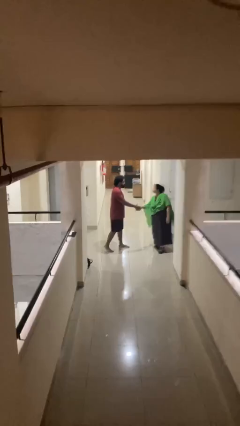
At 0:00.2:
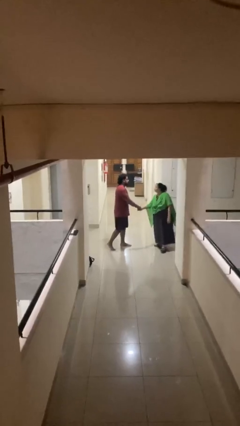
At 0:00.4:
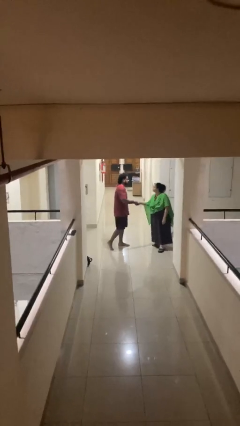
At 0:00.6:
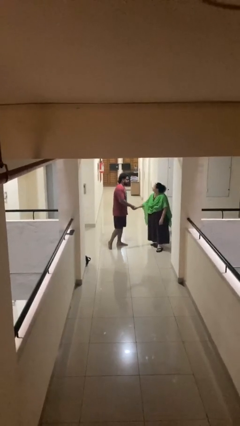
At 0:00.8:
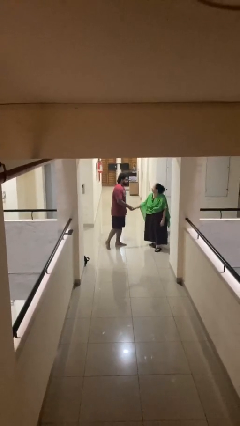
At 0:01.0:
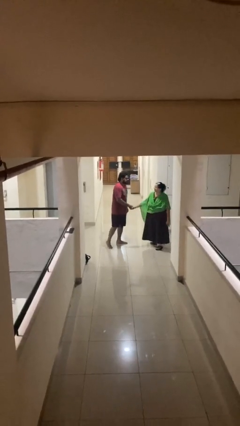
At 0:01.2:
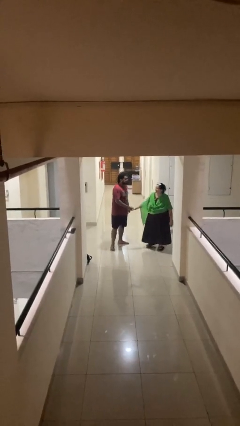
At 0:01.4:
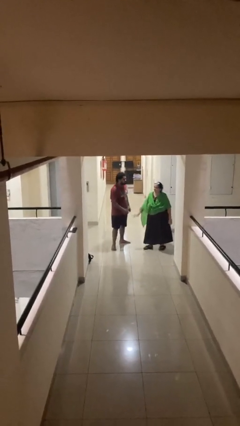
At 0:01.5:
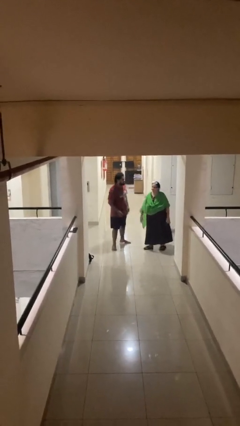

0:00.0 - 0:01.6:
person shakes hand

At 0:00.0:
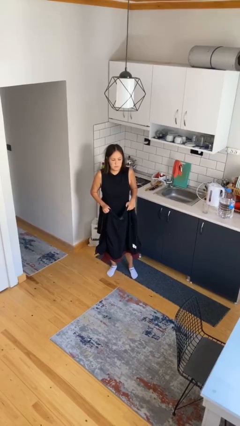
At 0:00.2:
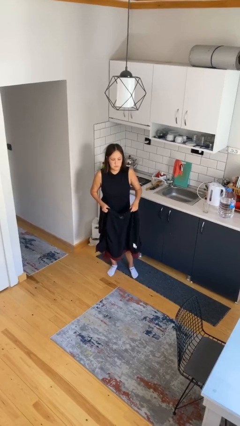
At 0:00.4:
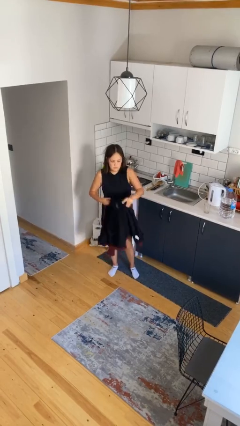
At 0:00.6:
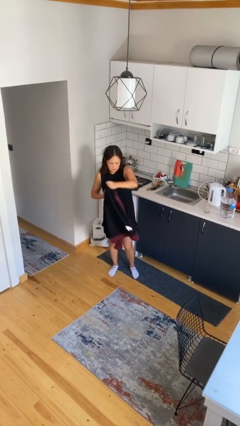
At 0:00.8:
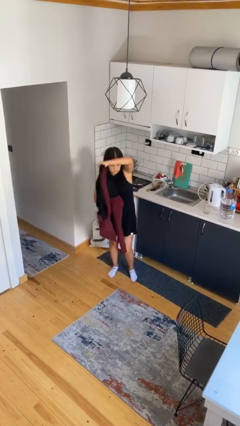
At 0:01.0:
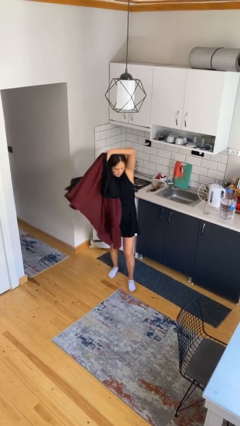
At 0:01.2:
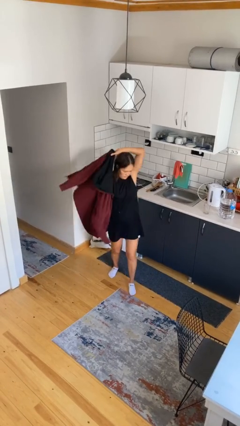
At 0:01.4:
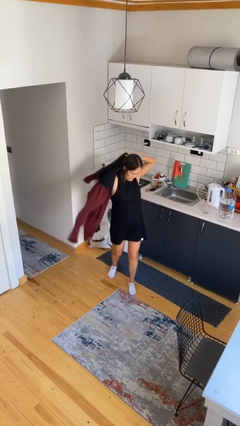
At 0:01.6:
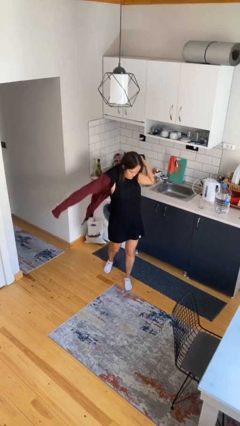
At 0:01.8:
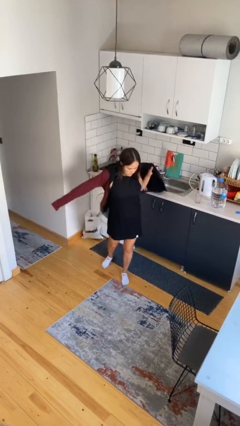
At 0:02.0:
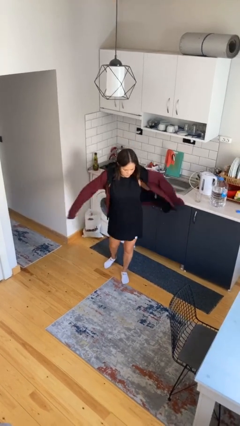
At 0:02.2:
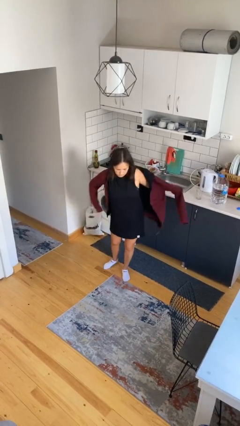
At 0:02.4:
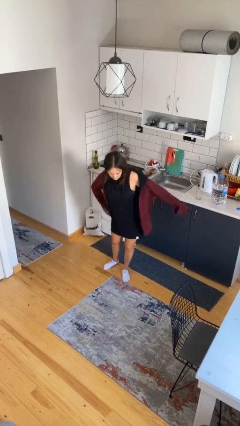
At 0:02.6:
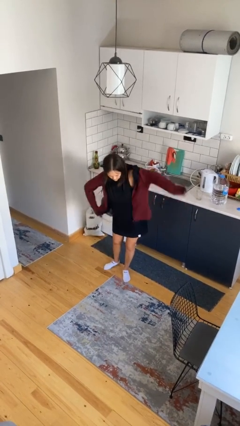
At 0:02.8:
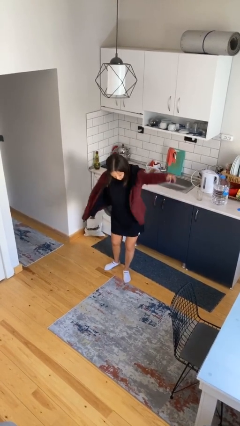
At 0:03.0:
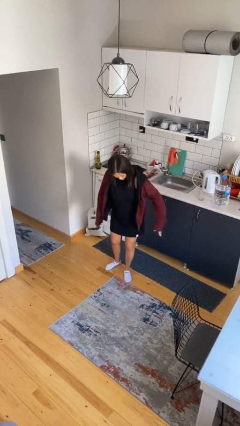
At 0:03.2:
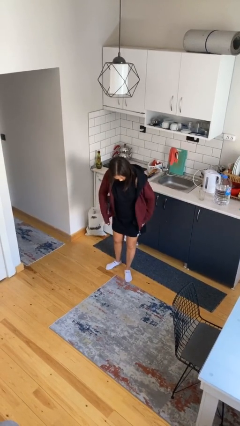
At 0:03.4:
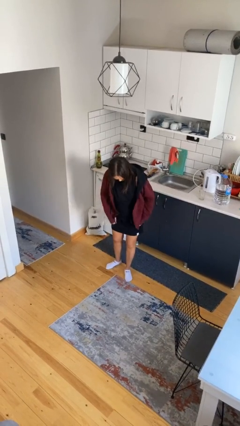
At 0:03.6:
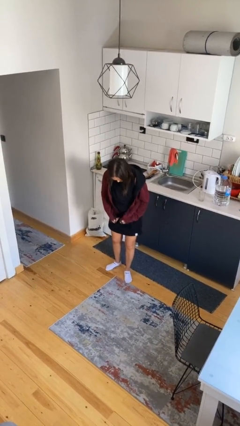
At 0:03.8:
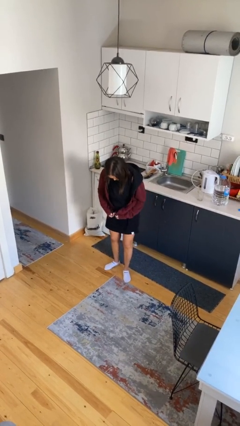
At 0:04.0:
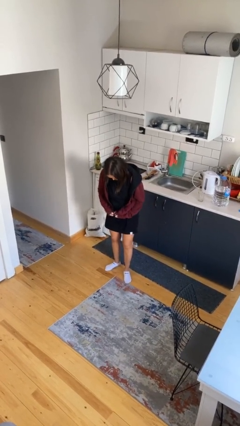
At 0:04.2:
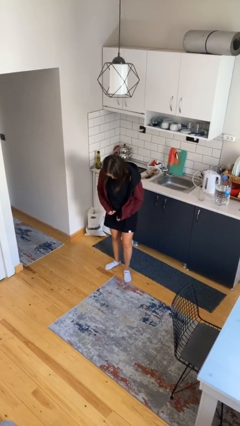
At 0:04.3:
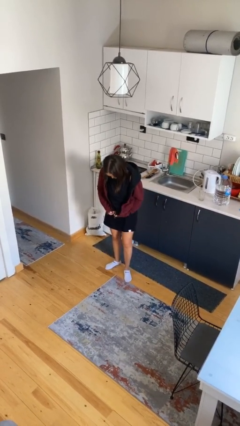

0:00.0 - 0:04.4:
person puts on jacket

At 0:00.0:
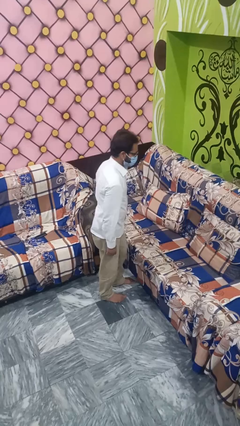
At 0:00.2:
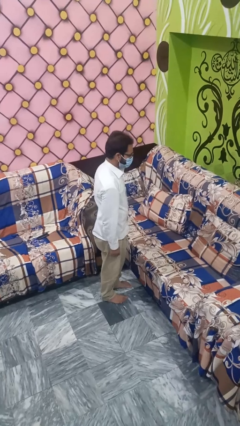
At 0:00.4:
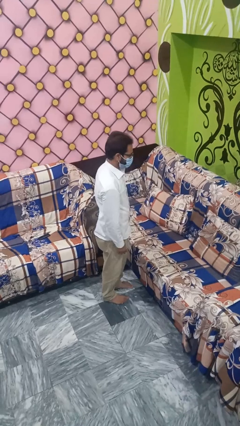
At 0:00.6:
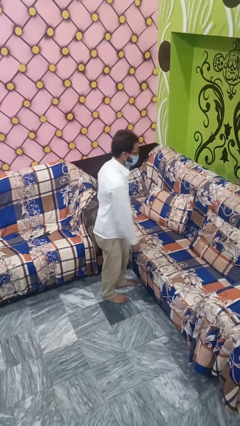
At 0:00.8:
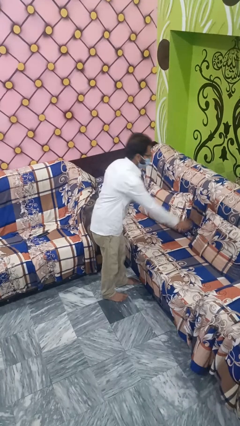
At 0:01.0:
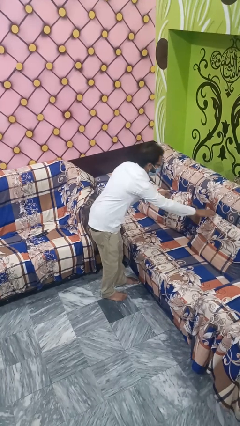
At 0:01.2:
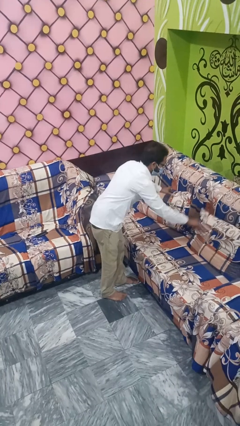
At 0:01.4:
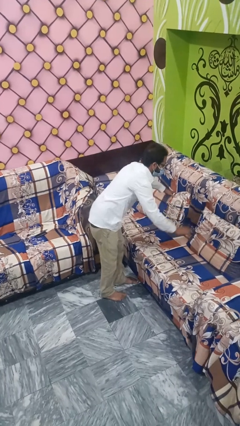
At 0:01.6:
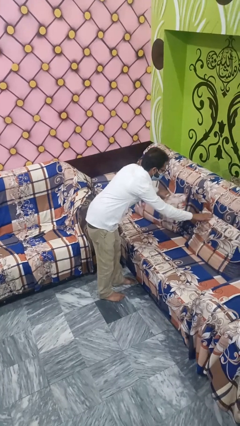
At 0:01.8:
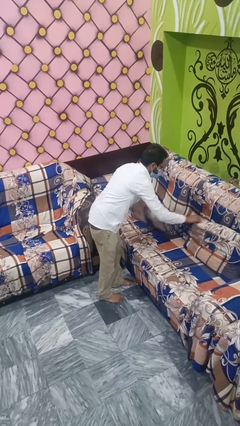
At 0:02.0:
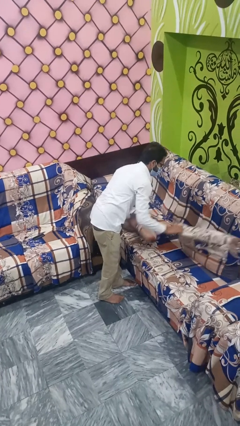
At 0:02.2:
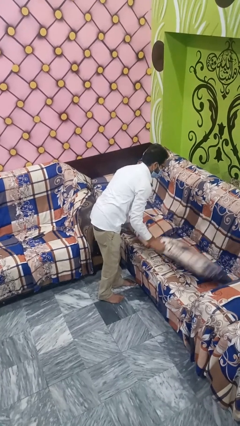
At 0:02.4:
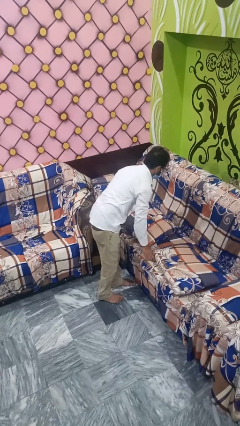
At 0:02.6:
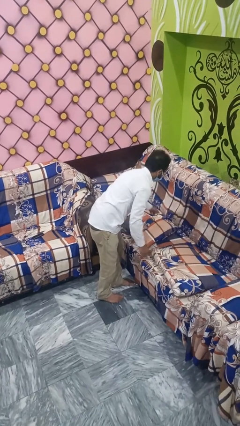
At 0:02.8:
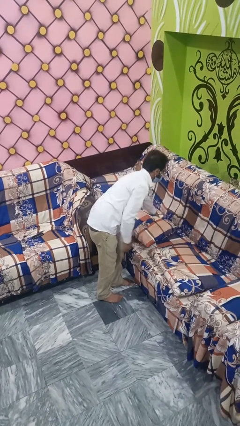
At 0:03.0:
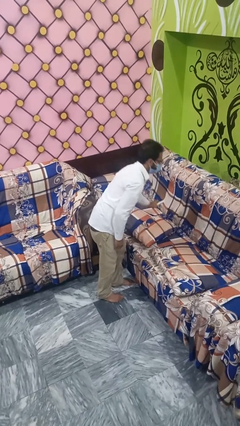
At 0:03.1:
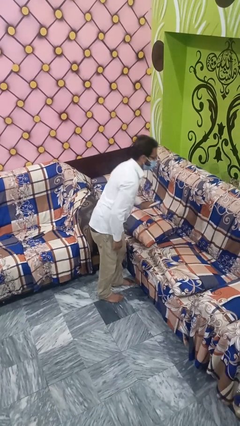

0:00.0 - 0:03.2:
person searches in couch

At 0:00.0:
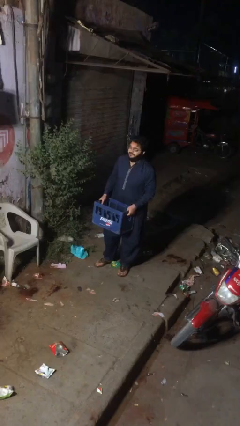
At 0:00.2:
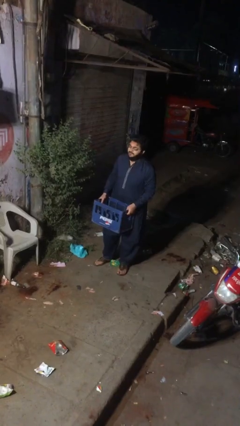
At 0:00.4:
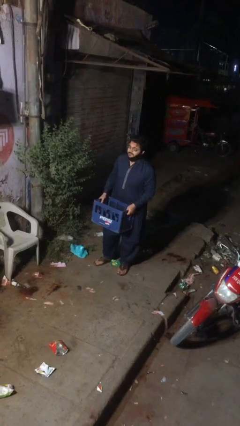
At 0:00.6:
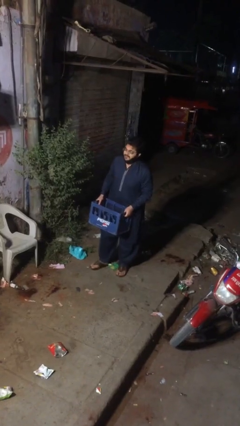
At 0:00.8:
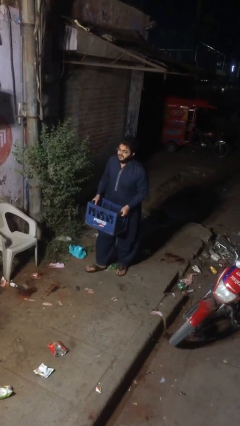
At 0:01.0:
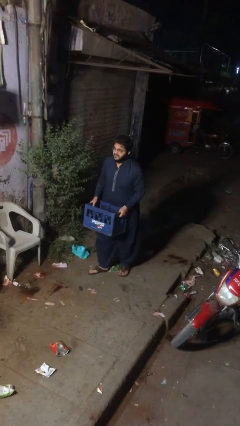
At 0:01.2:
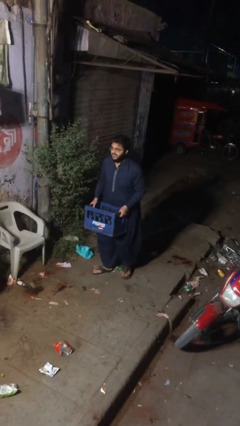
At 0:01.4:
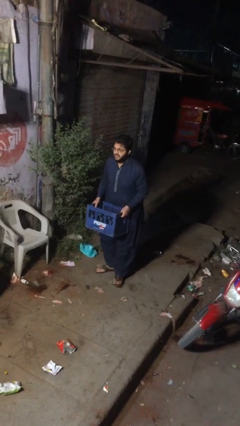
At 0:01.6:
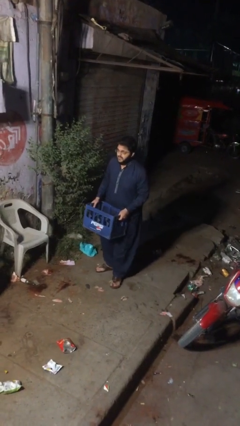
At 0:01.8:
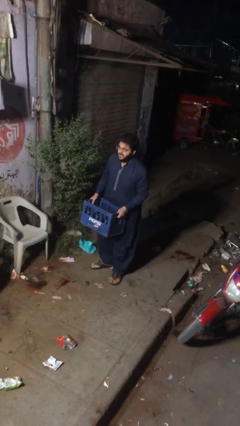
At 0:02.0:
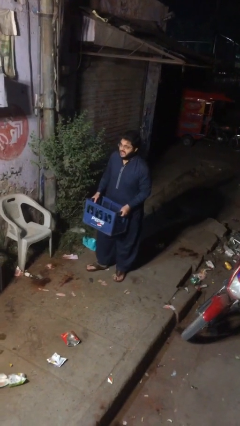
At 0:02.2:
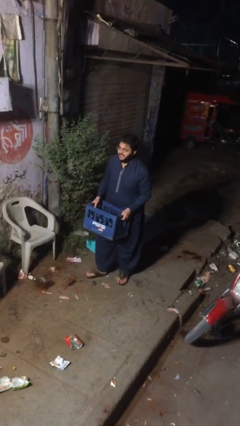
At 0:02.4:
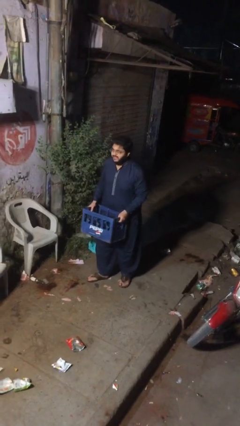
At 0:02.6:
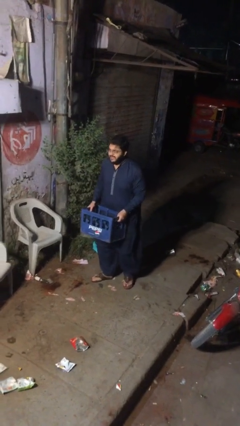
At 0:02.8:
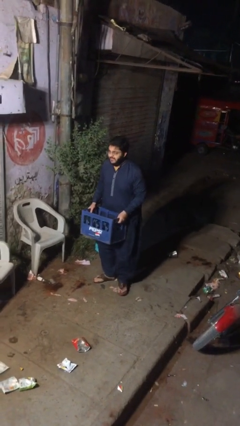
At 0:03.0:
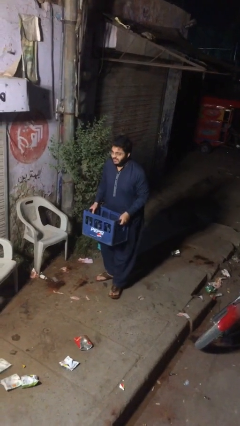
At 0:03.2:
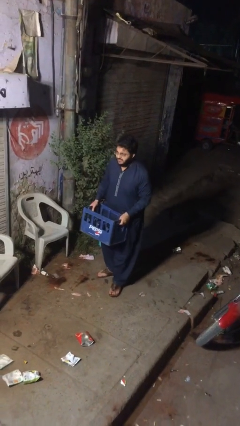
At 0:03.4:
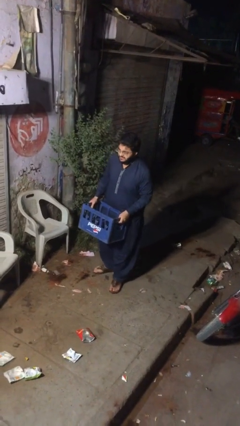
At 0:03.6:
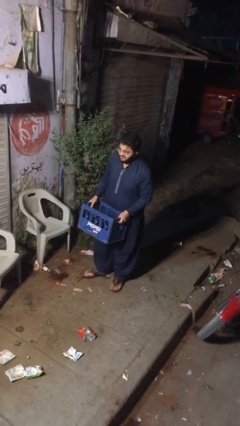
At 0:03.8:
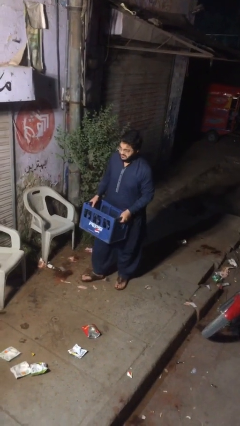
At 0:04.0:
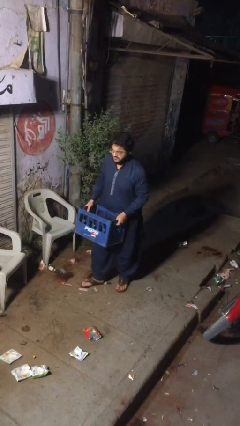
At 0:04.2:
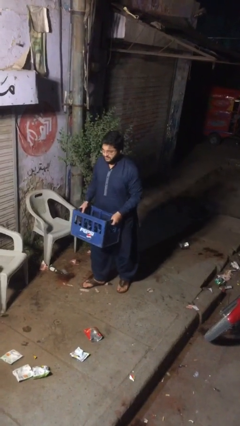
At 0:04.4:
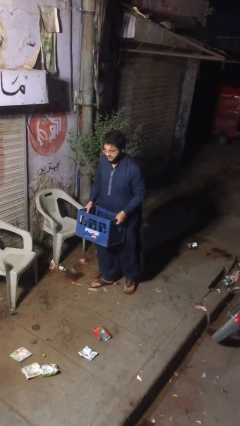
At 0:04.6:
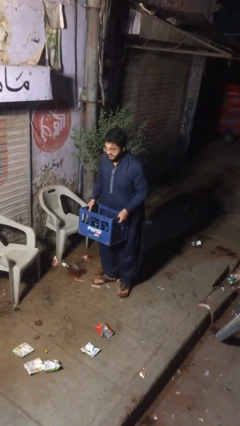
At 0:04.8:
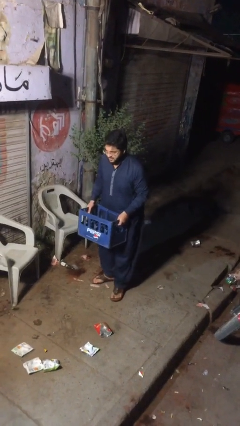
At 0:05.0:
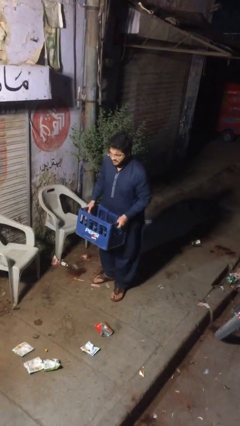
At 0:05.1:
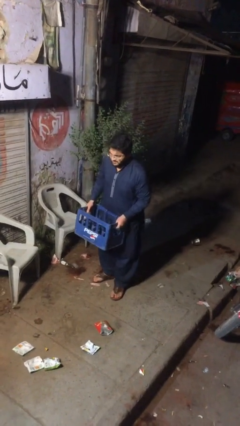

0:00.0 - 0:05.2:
person carries heavy object

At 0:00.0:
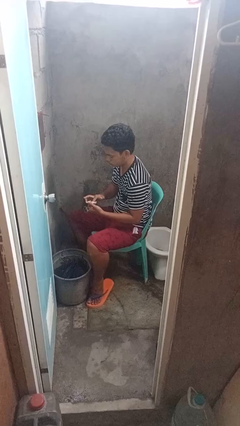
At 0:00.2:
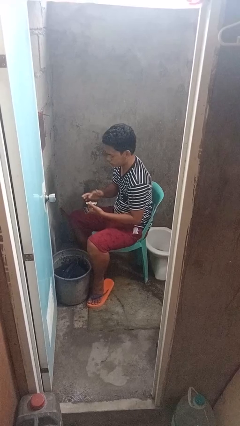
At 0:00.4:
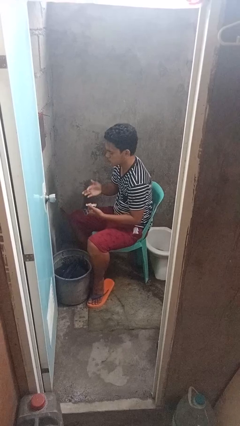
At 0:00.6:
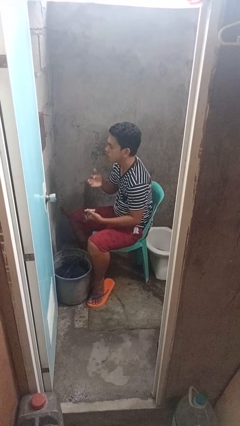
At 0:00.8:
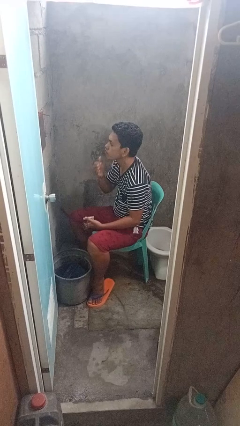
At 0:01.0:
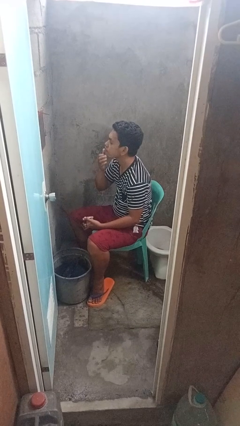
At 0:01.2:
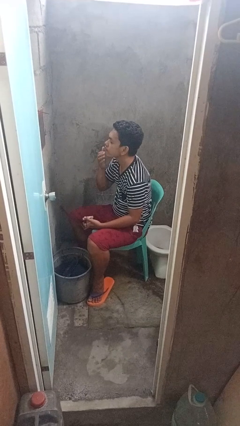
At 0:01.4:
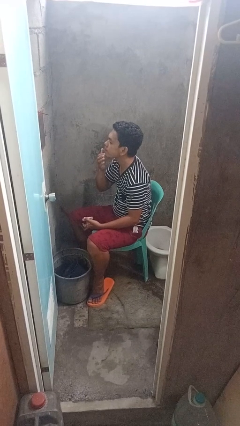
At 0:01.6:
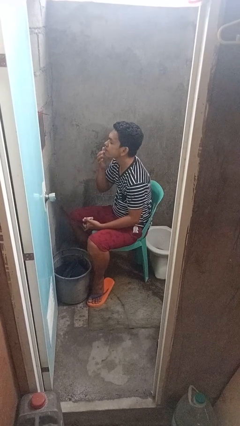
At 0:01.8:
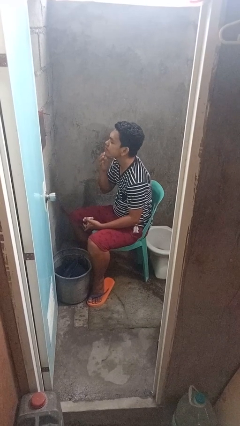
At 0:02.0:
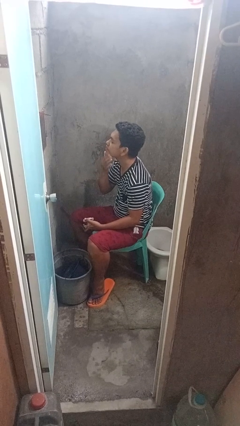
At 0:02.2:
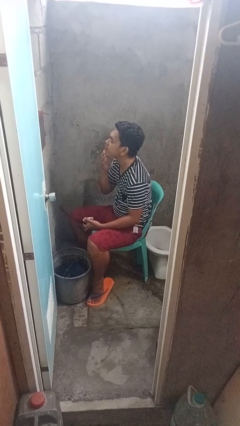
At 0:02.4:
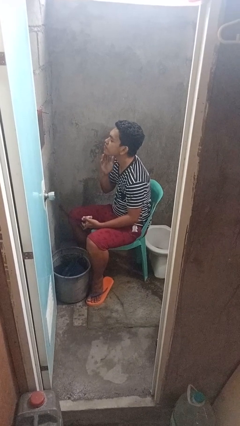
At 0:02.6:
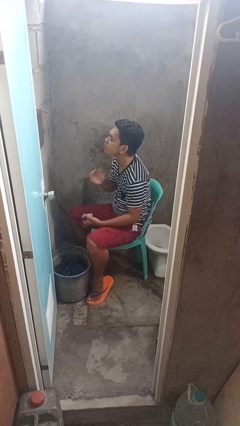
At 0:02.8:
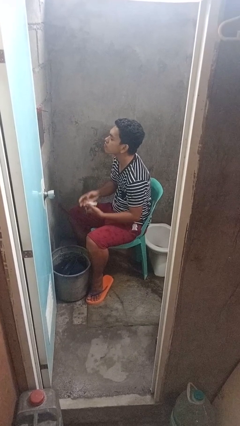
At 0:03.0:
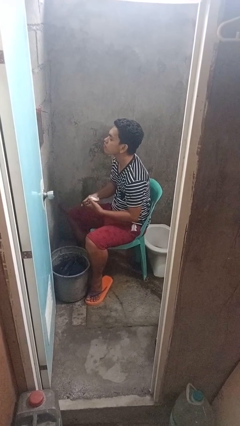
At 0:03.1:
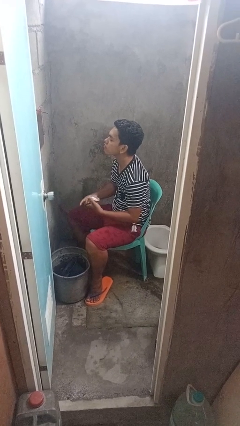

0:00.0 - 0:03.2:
person applies shaving cream
